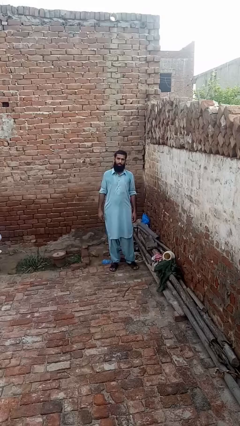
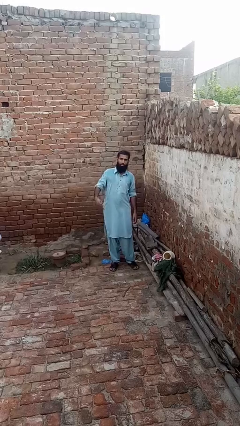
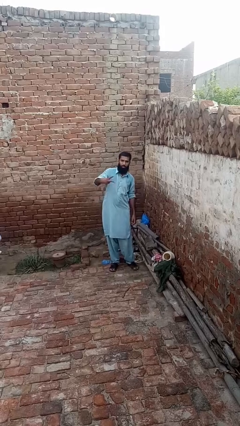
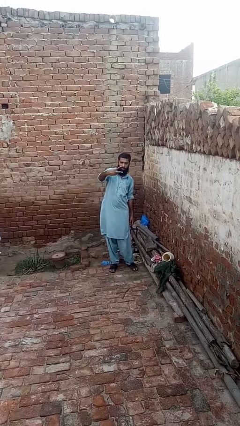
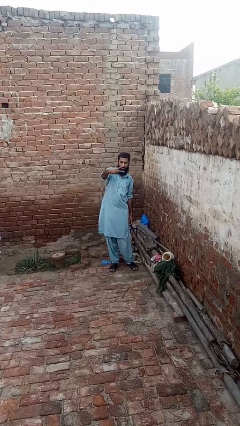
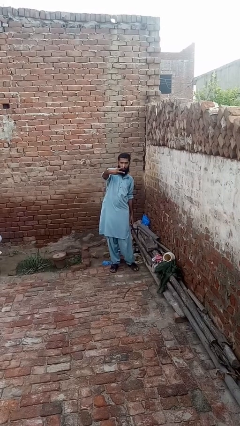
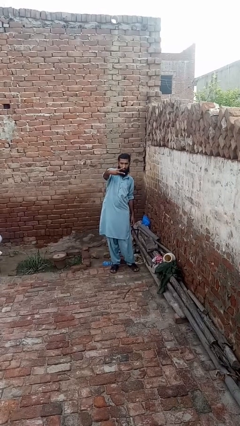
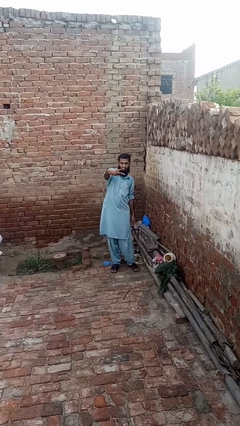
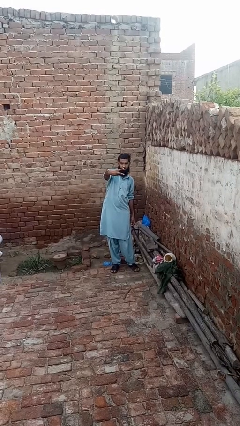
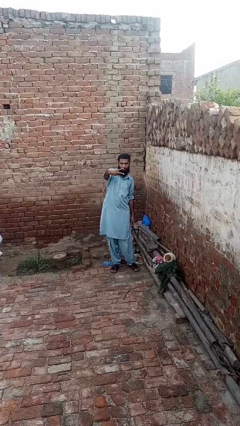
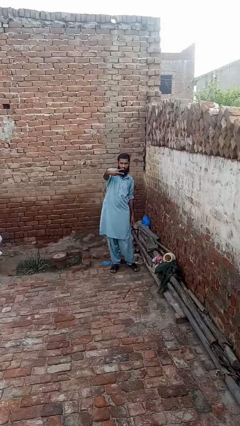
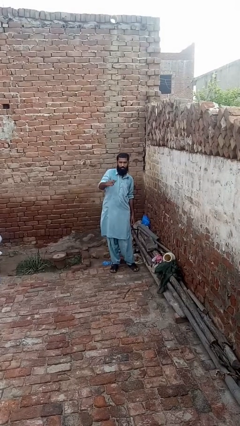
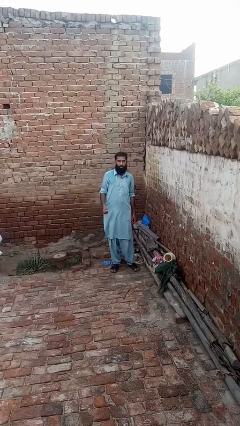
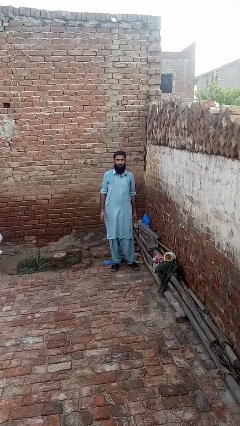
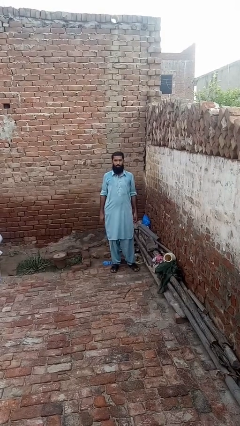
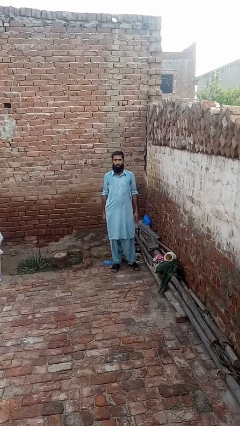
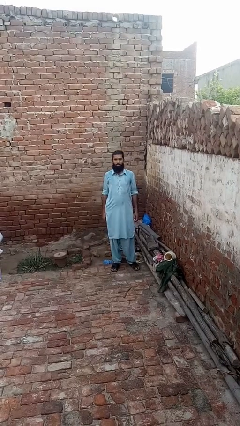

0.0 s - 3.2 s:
person gestures peace

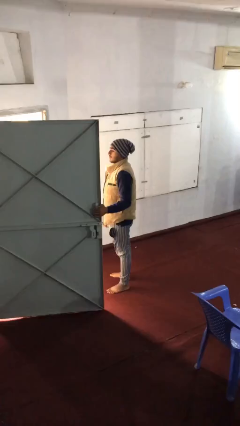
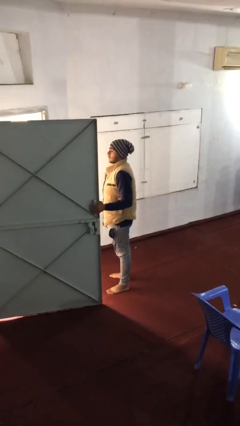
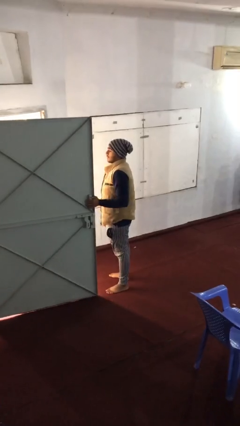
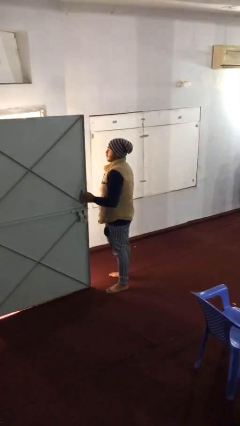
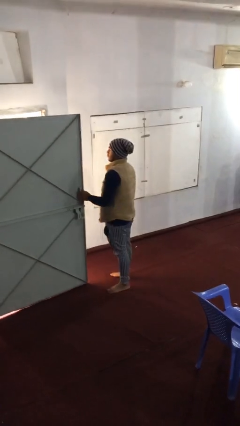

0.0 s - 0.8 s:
person closes facility door

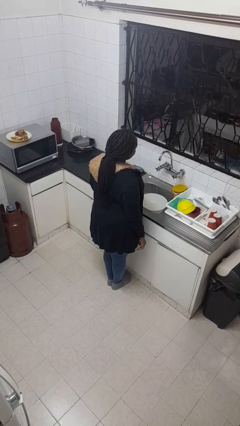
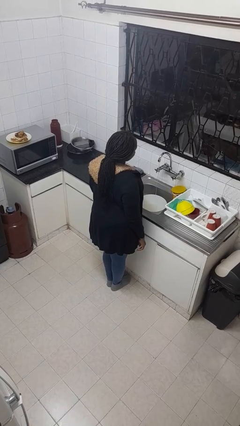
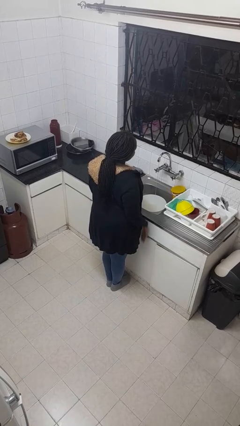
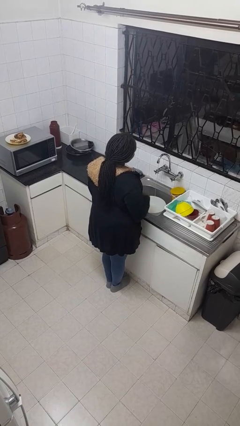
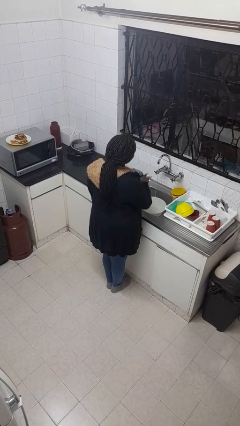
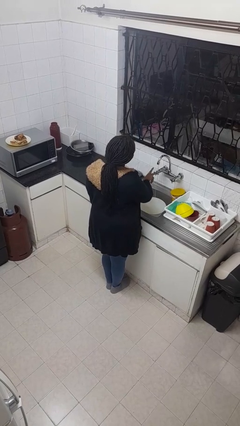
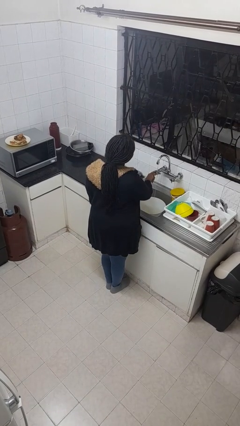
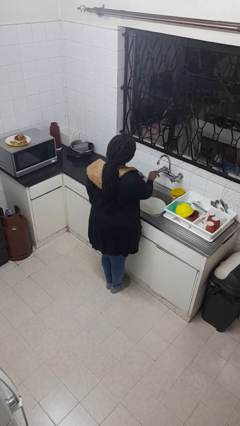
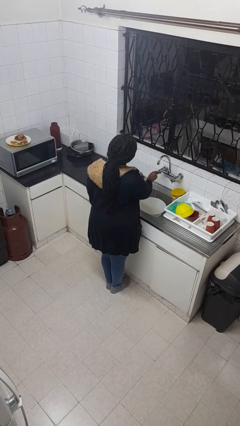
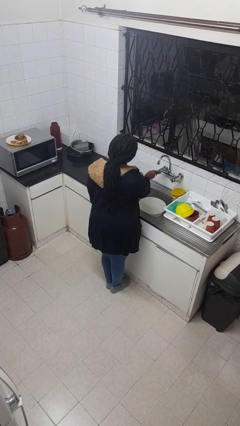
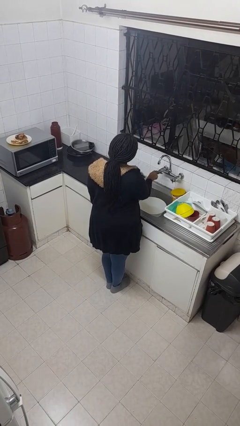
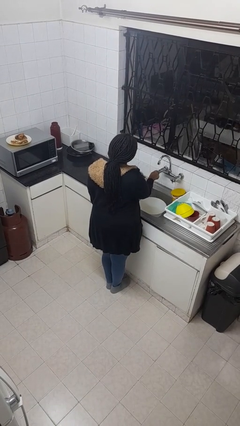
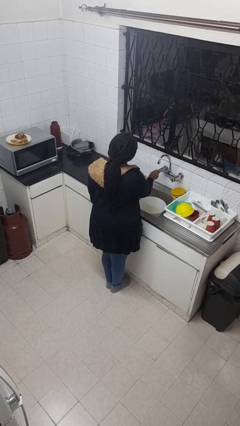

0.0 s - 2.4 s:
person turns off faucet

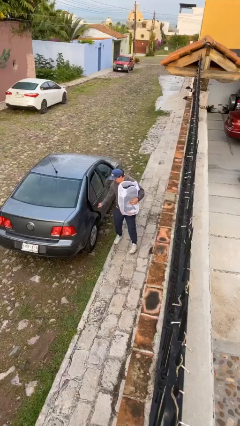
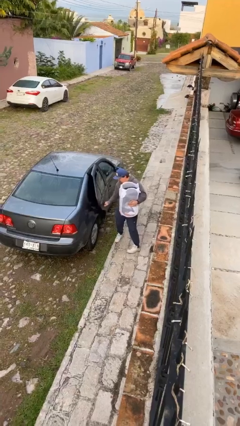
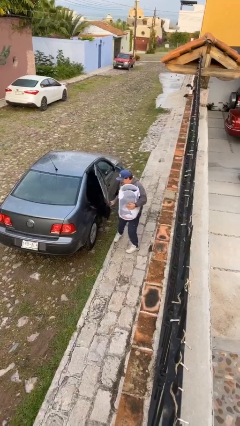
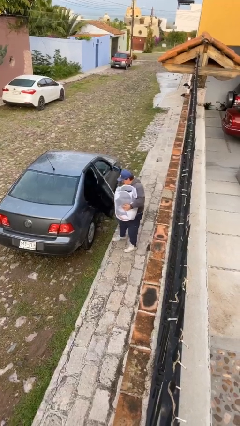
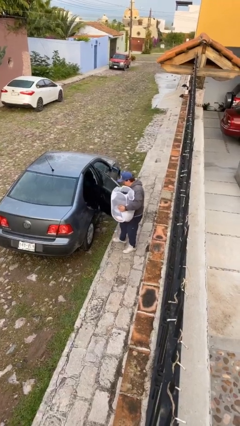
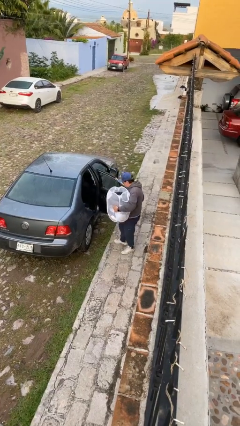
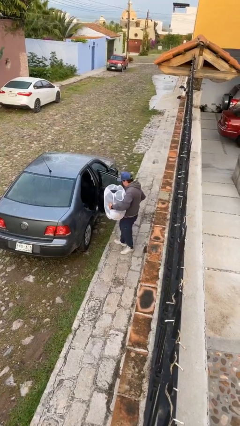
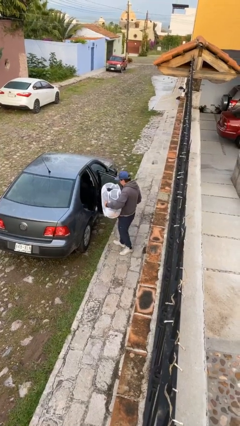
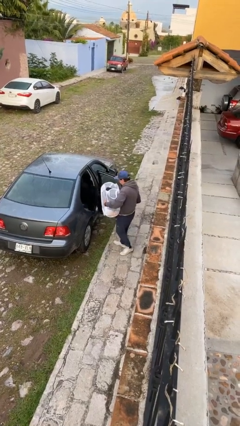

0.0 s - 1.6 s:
person opens car door

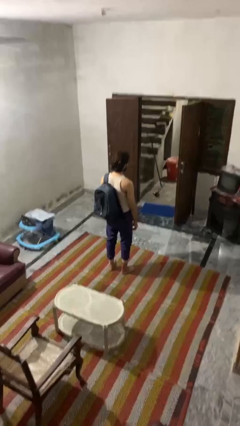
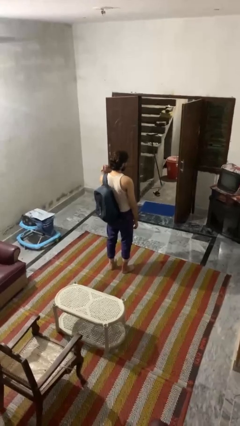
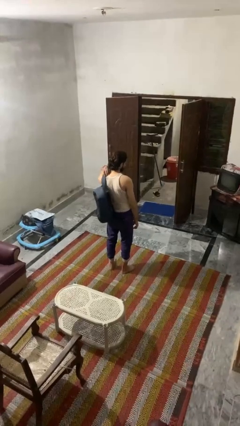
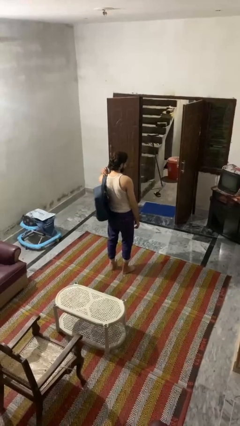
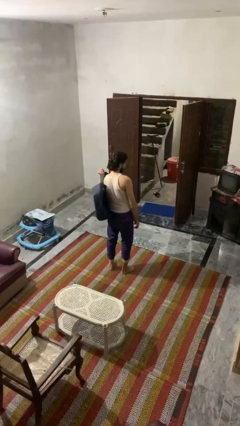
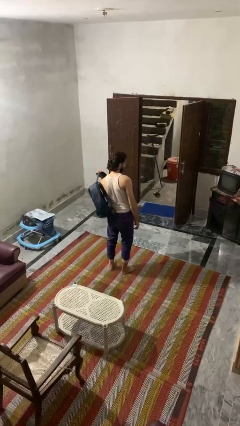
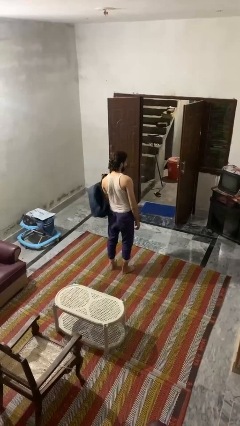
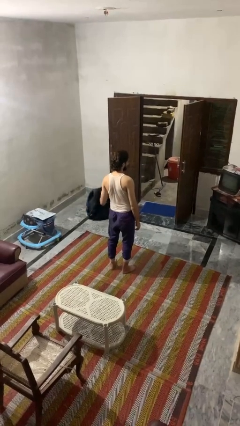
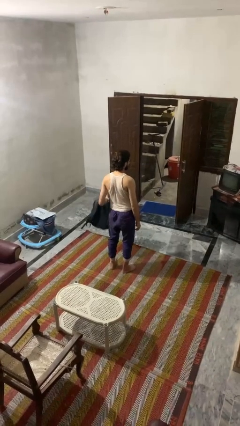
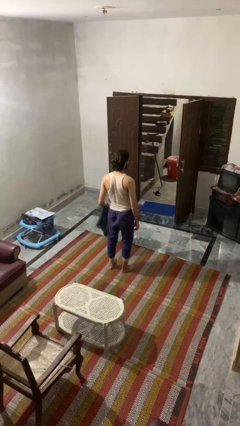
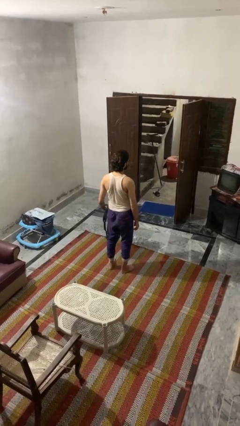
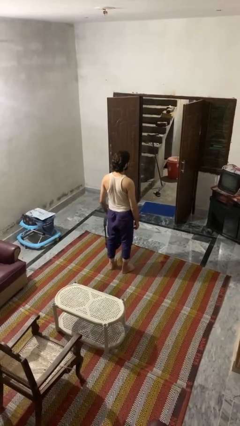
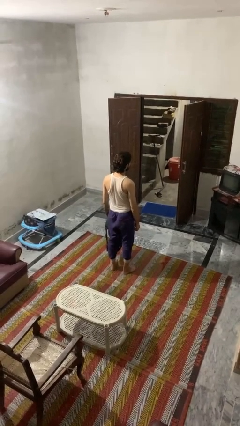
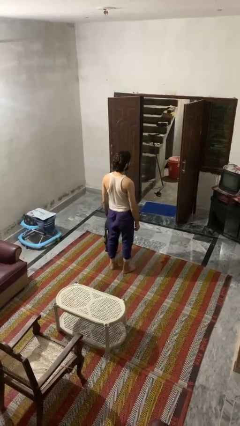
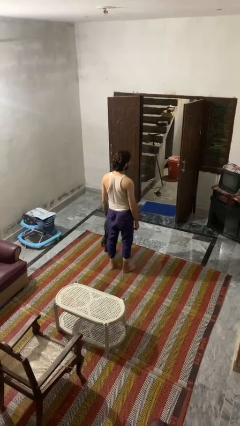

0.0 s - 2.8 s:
person takes off backpack

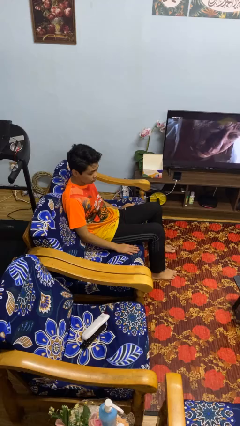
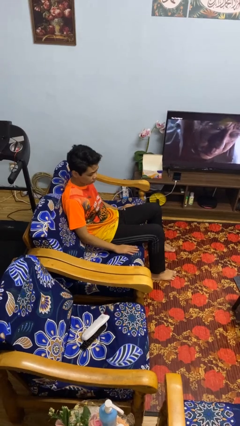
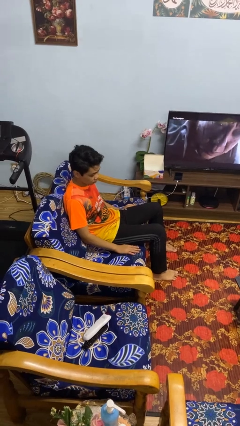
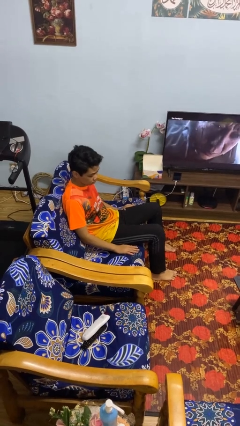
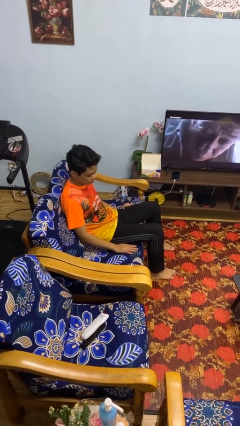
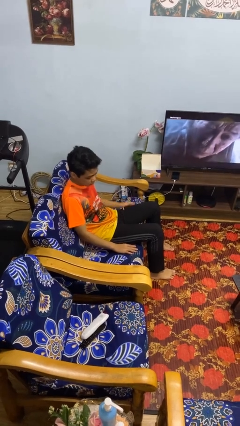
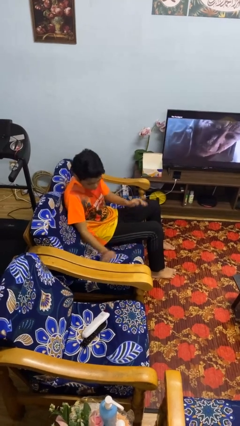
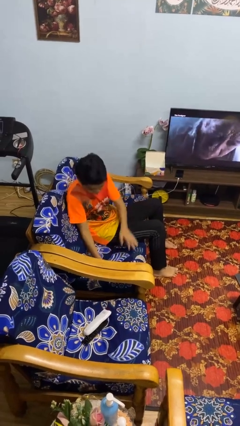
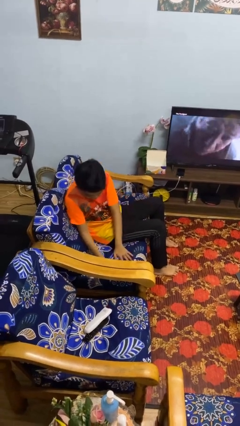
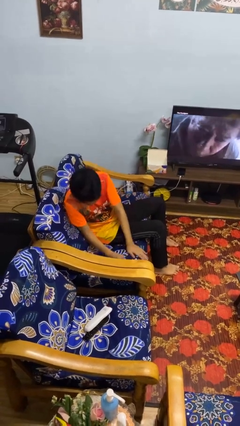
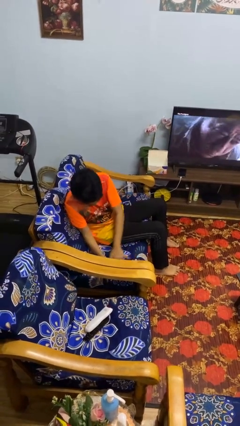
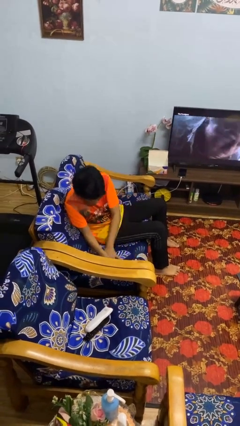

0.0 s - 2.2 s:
person searches in couch

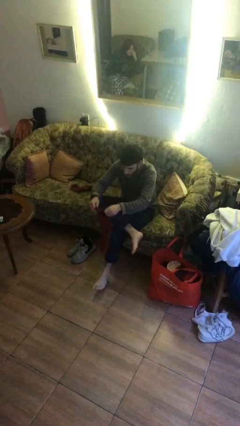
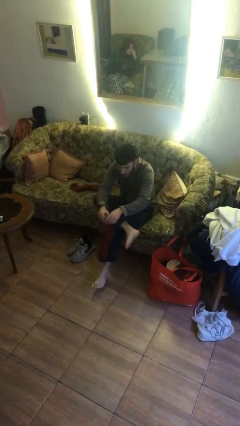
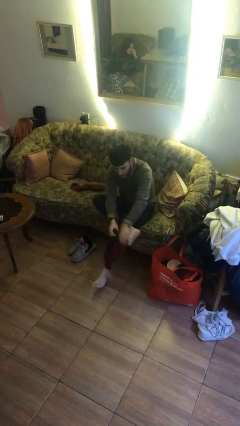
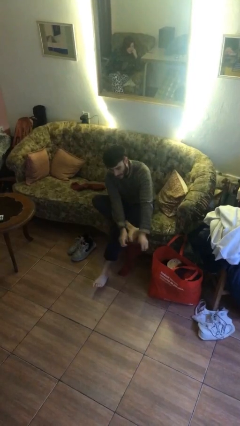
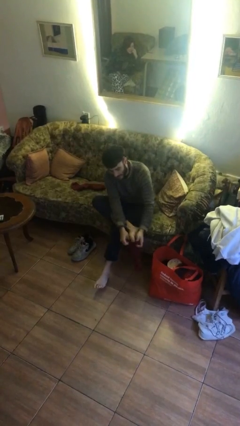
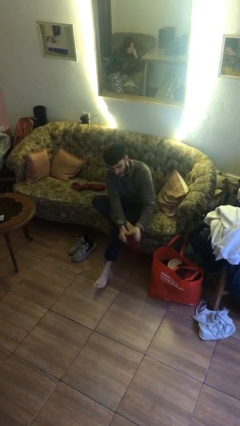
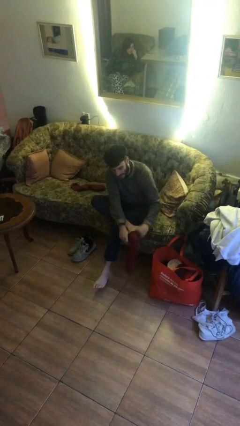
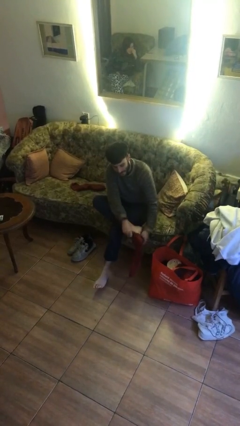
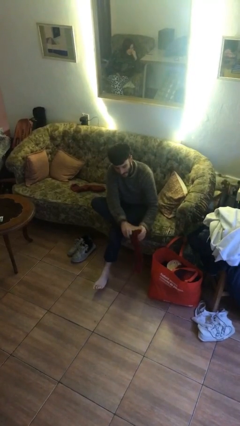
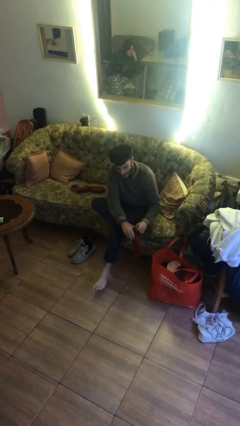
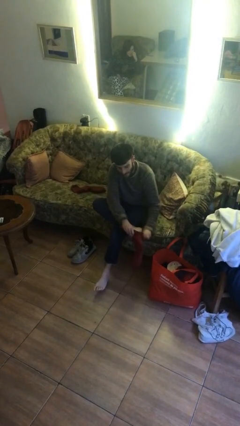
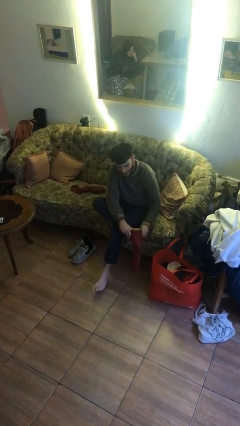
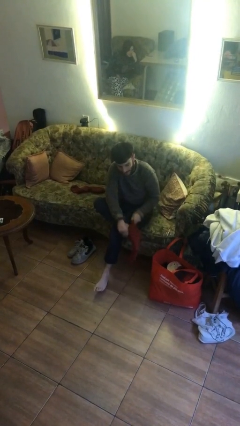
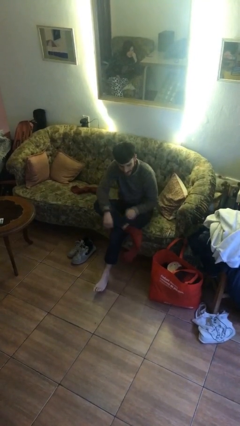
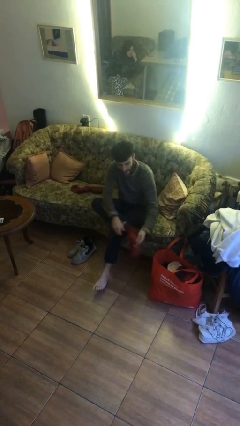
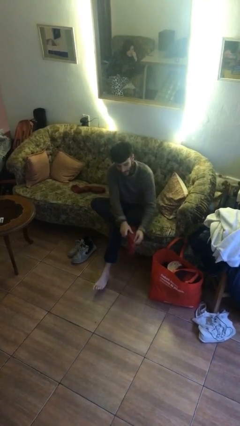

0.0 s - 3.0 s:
person puts on socks

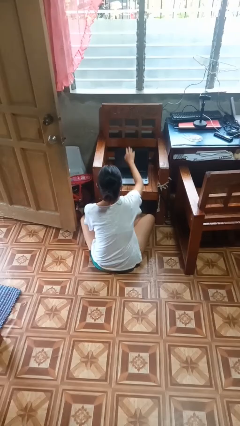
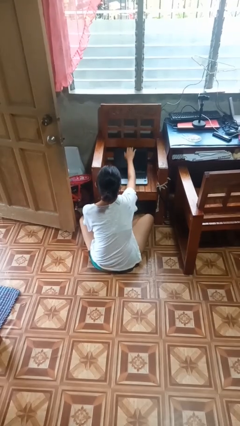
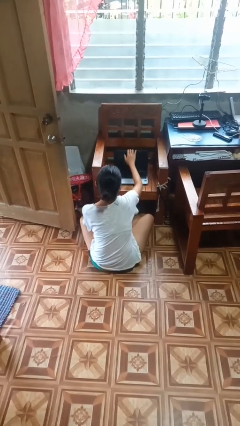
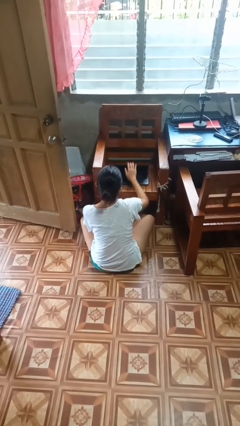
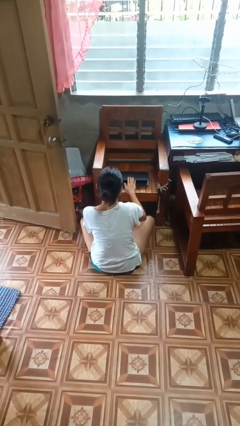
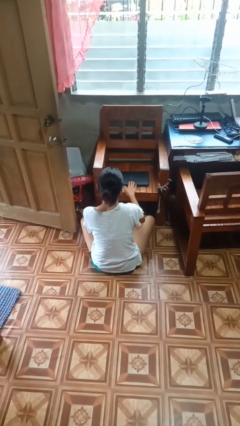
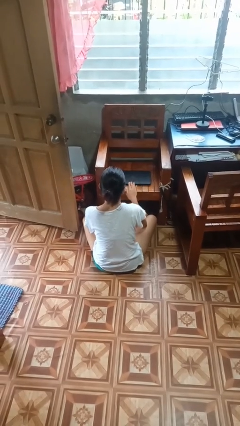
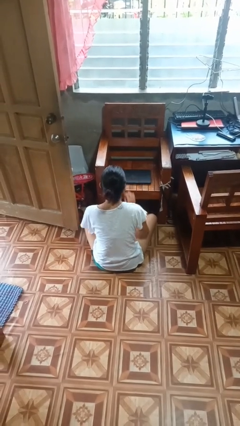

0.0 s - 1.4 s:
person closes laptop
